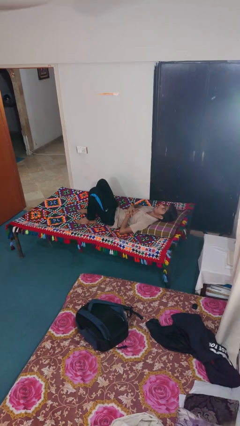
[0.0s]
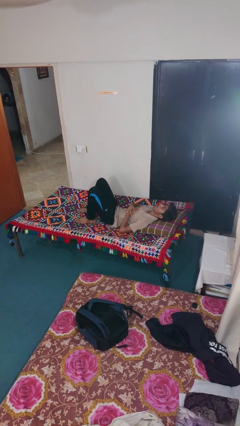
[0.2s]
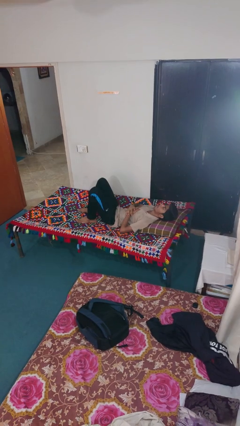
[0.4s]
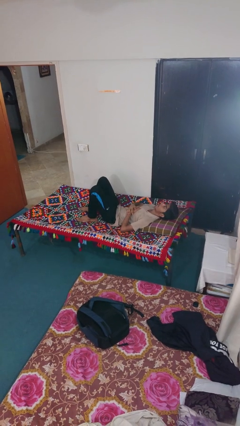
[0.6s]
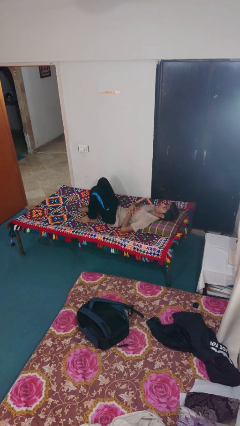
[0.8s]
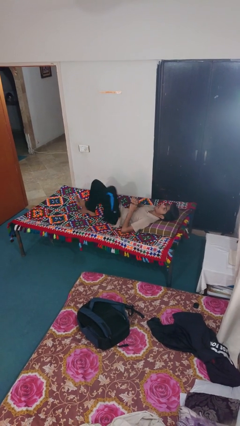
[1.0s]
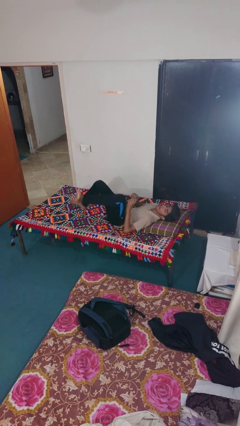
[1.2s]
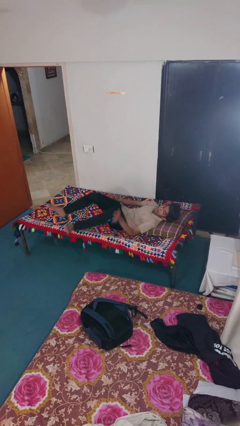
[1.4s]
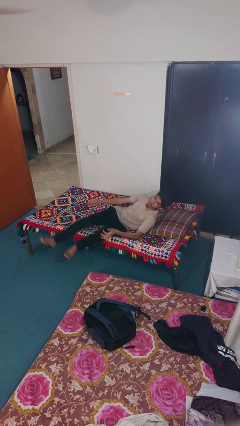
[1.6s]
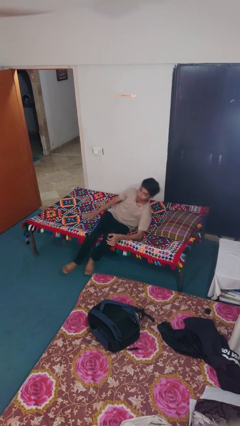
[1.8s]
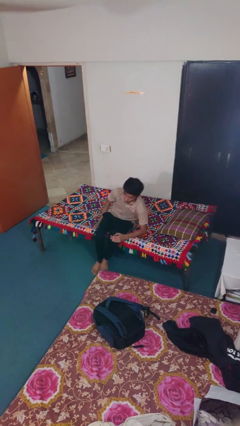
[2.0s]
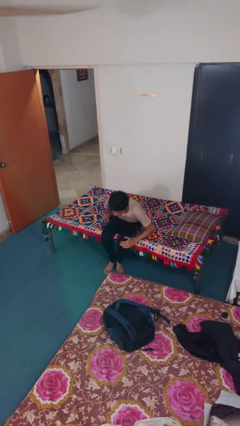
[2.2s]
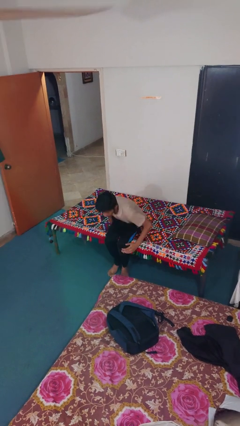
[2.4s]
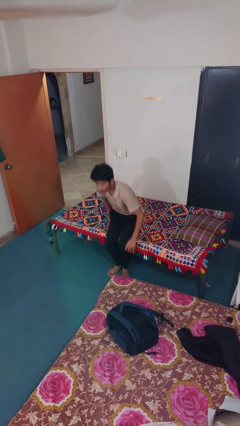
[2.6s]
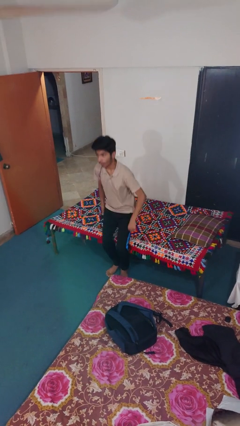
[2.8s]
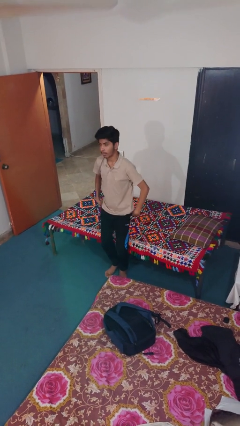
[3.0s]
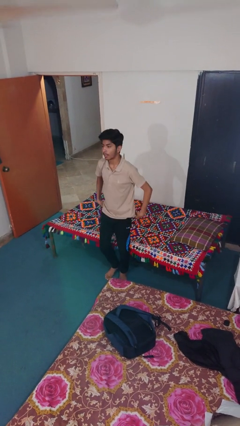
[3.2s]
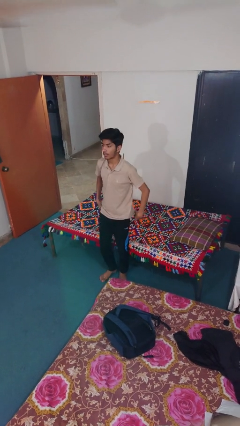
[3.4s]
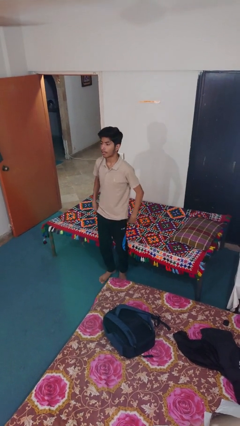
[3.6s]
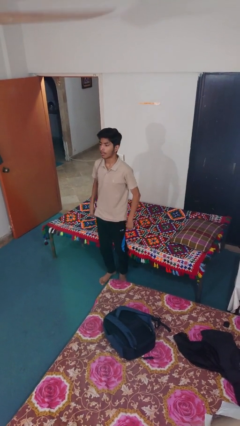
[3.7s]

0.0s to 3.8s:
person stands up

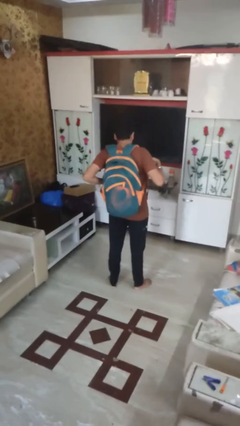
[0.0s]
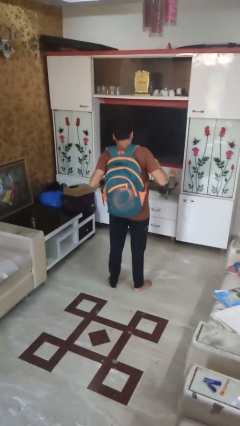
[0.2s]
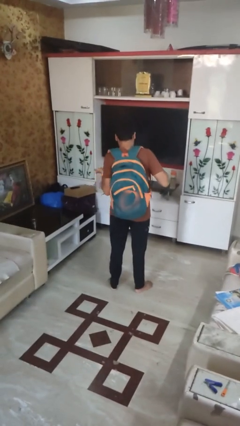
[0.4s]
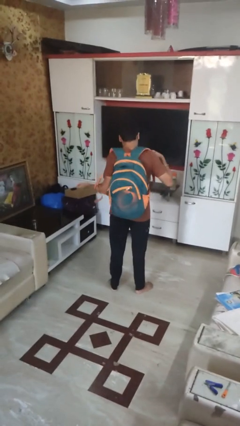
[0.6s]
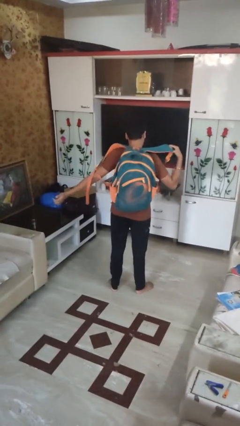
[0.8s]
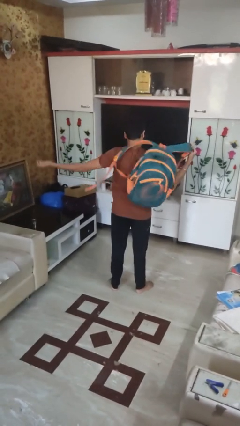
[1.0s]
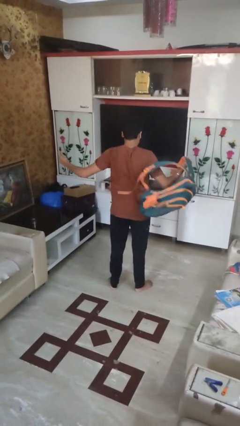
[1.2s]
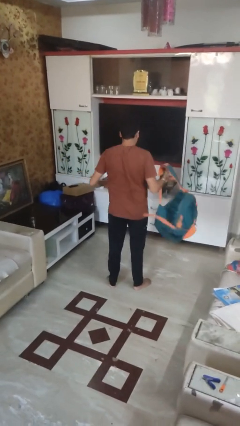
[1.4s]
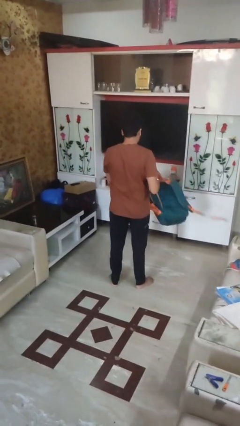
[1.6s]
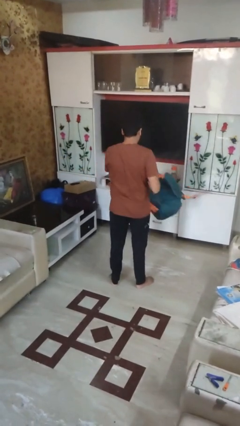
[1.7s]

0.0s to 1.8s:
person takes off backpack

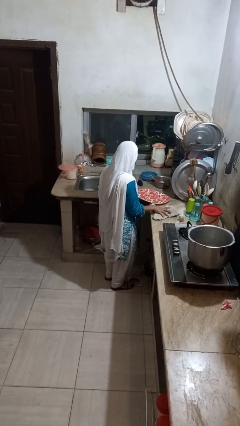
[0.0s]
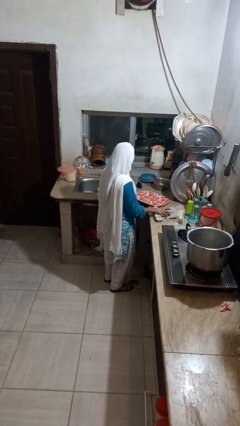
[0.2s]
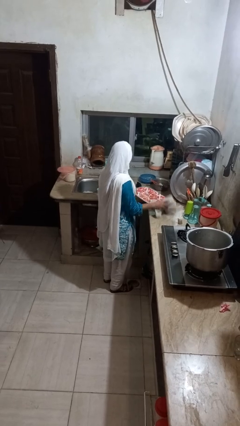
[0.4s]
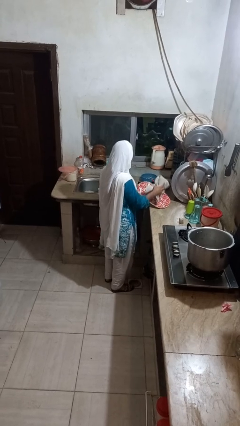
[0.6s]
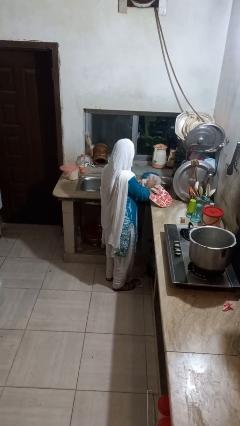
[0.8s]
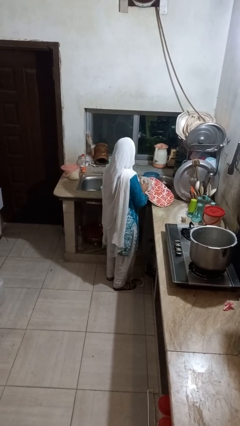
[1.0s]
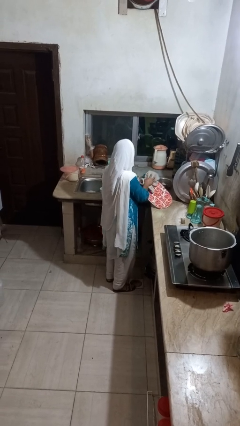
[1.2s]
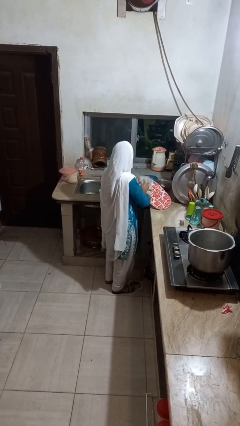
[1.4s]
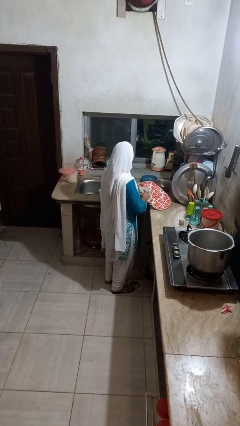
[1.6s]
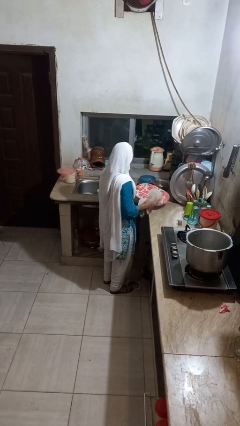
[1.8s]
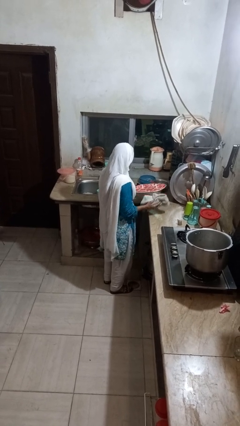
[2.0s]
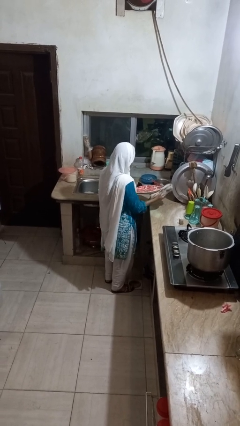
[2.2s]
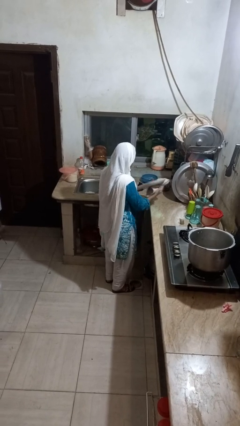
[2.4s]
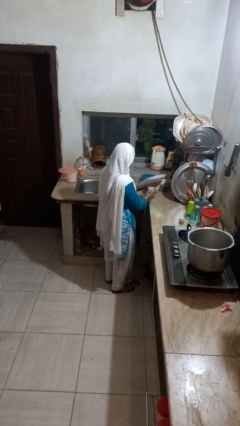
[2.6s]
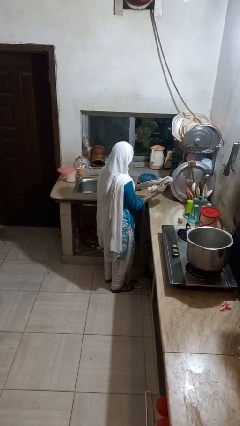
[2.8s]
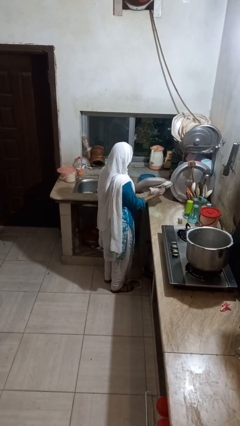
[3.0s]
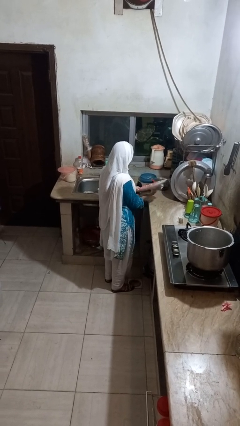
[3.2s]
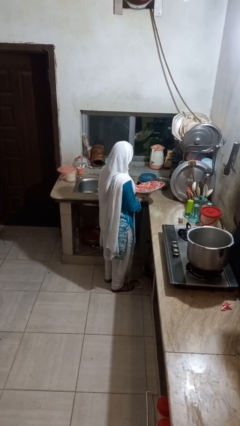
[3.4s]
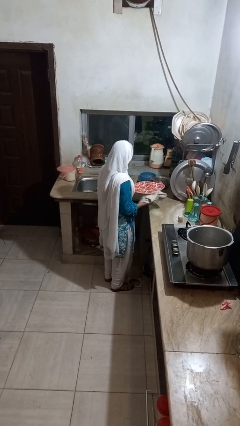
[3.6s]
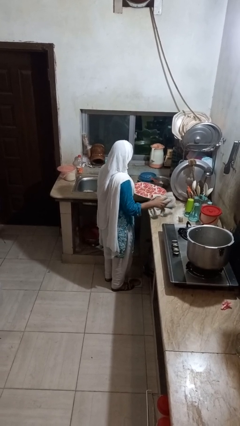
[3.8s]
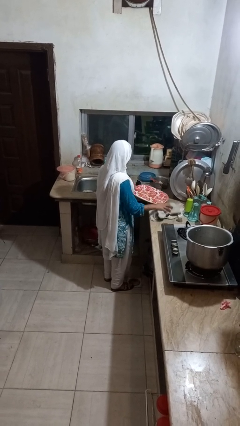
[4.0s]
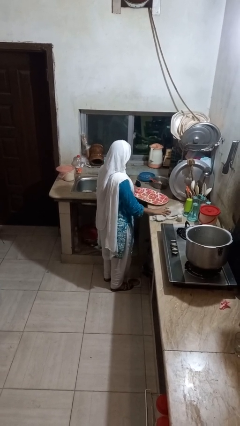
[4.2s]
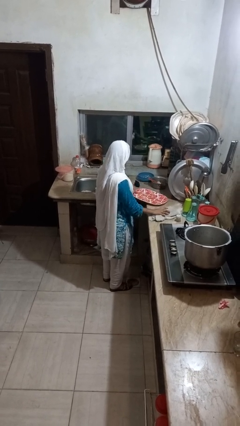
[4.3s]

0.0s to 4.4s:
person dries dish

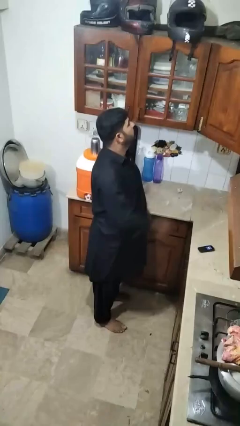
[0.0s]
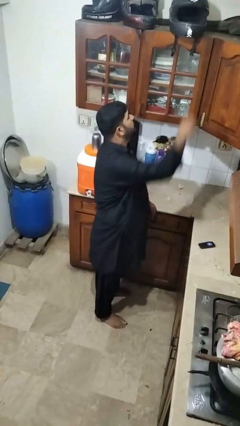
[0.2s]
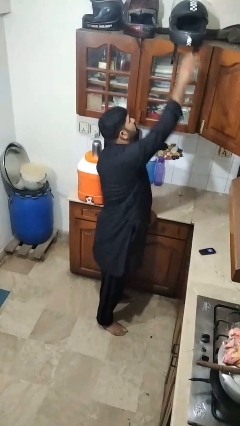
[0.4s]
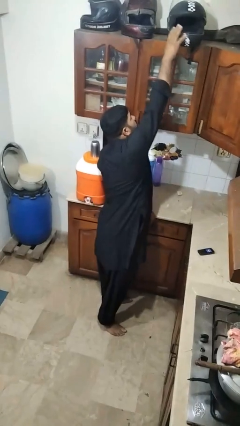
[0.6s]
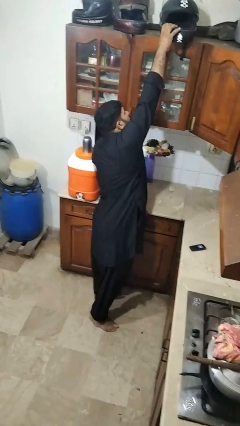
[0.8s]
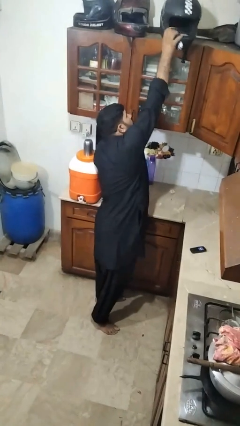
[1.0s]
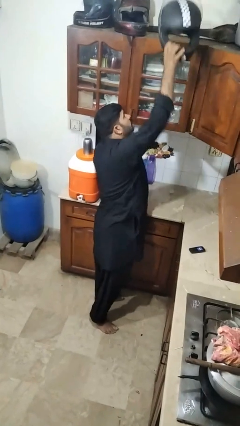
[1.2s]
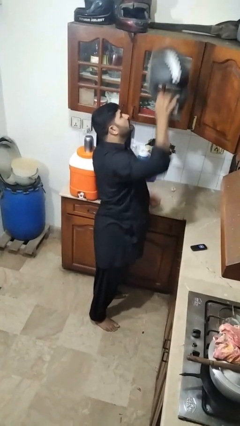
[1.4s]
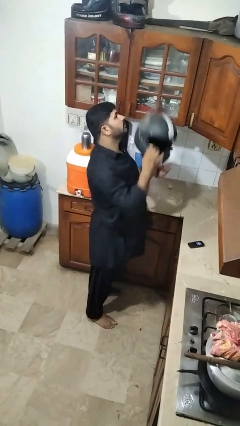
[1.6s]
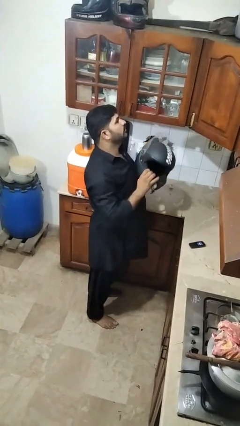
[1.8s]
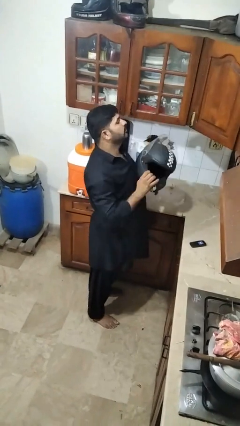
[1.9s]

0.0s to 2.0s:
person picks up object from shelf

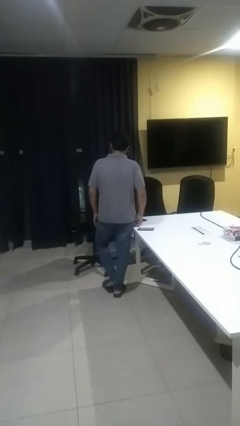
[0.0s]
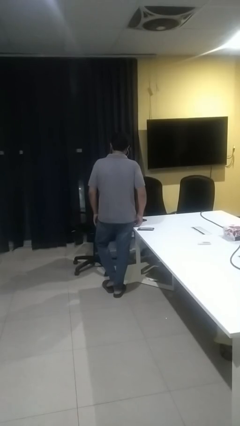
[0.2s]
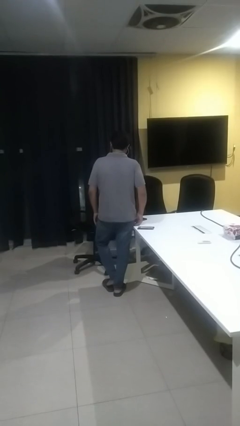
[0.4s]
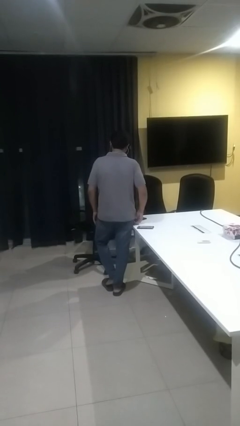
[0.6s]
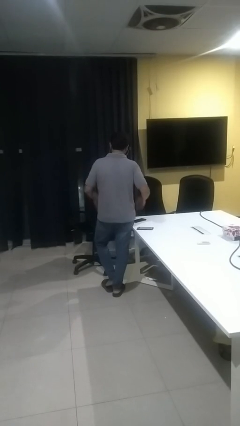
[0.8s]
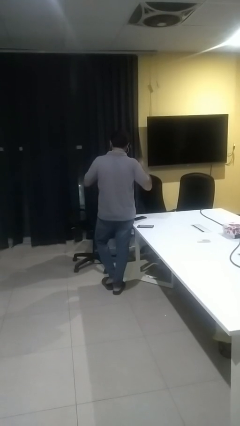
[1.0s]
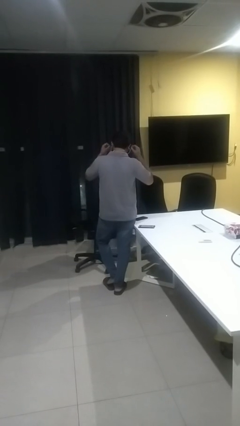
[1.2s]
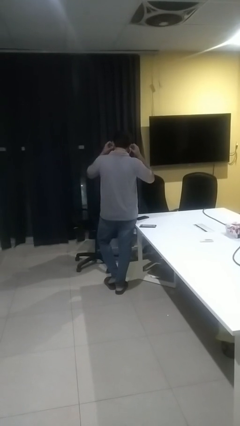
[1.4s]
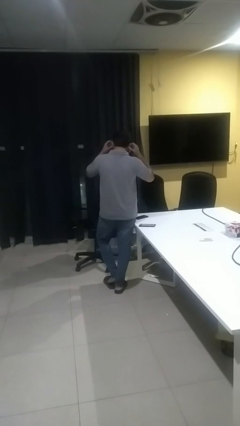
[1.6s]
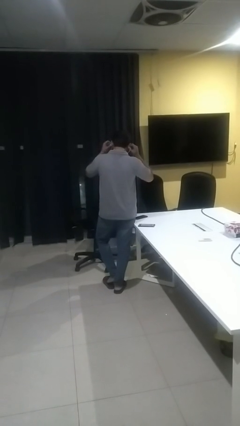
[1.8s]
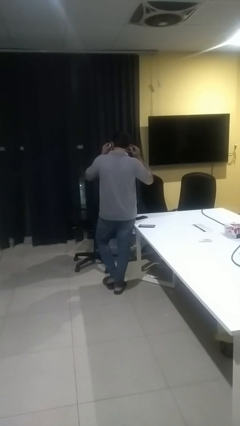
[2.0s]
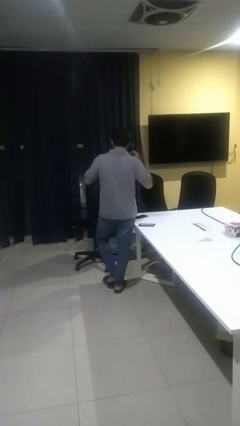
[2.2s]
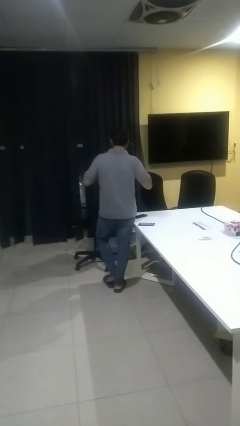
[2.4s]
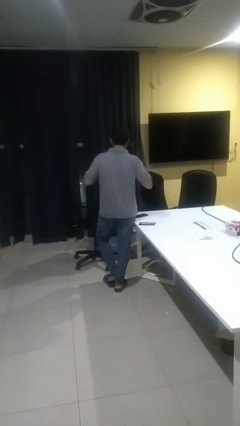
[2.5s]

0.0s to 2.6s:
person takes off headphones

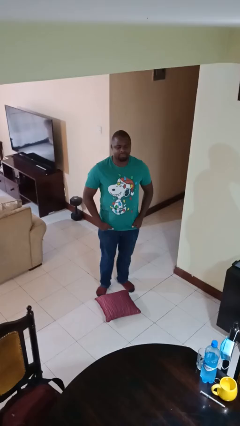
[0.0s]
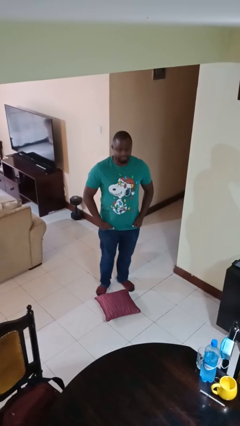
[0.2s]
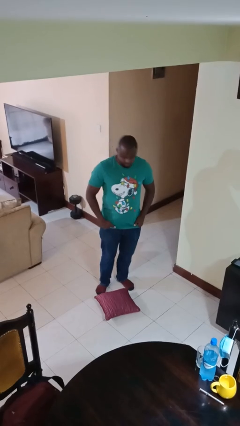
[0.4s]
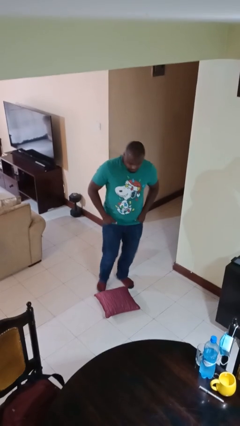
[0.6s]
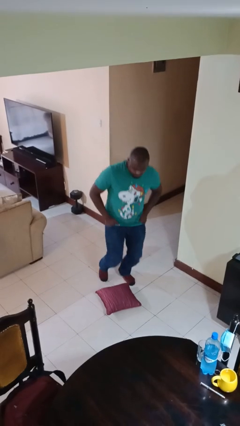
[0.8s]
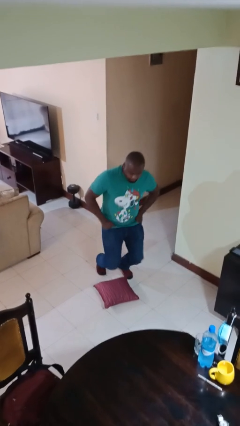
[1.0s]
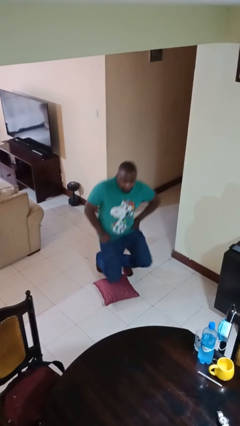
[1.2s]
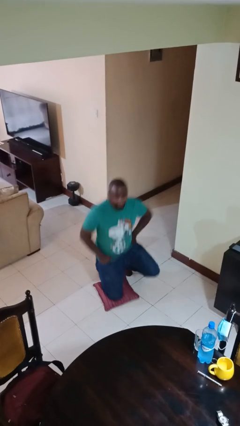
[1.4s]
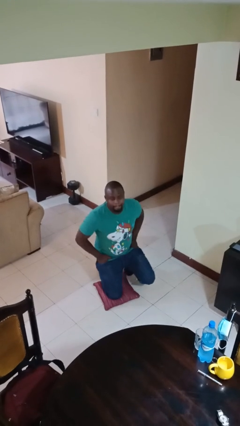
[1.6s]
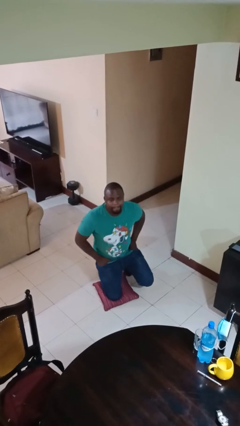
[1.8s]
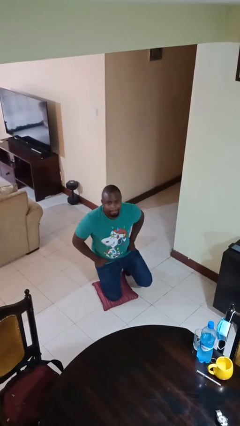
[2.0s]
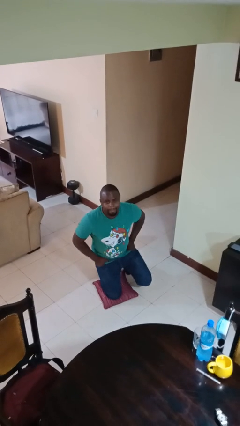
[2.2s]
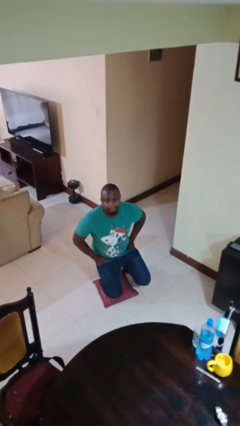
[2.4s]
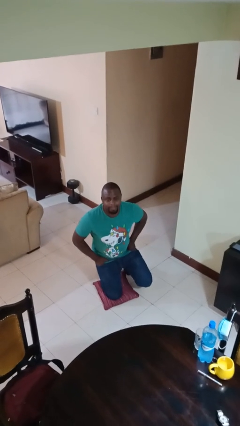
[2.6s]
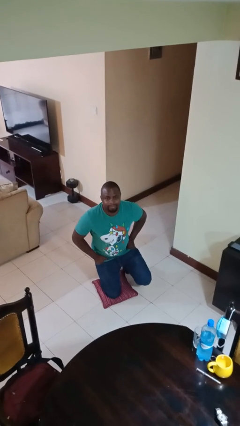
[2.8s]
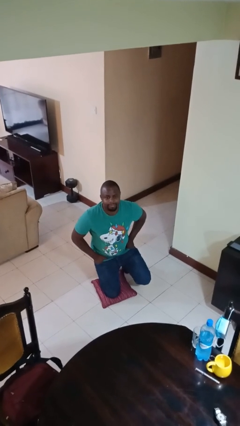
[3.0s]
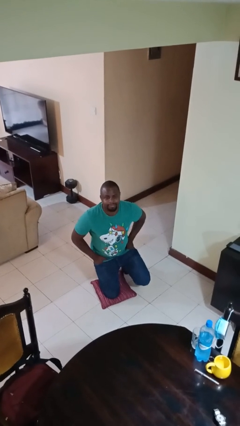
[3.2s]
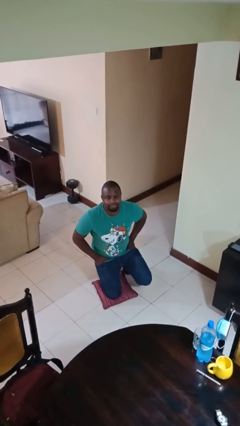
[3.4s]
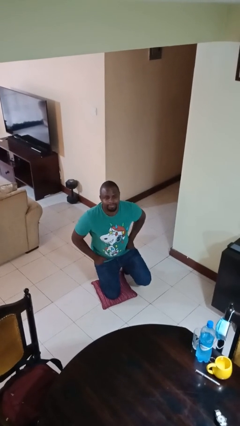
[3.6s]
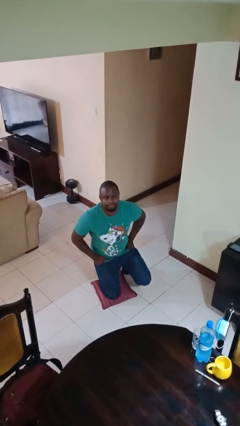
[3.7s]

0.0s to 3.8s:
person kneels
